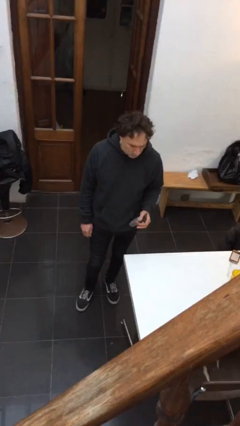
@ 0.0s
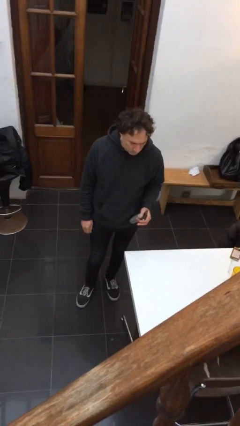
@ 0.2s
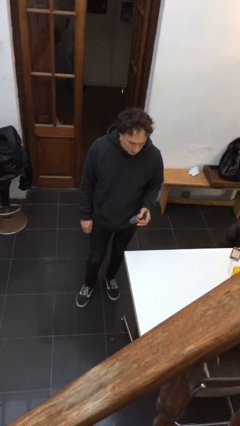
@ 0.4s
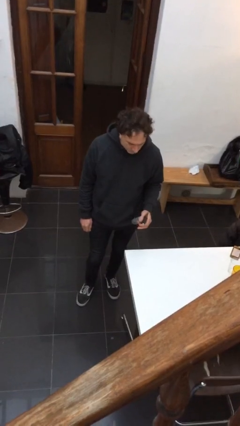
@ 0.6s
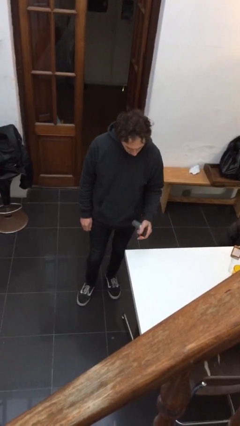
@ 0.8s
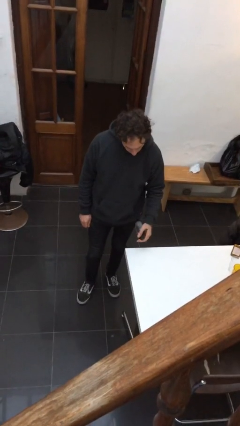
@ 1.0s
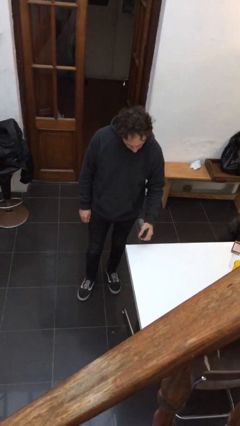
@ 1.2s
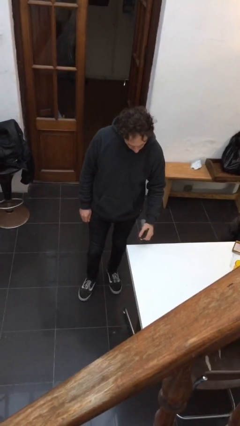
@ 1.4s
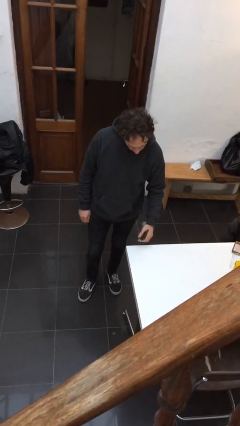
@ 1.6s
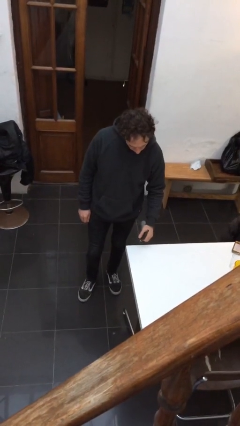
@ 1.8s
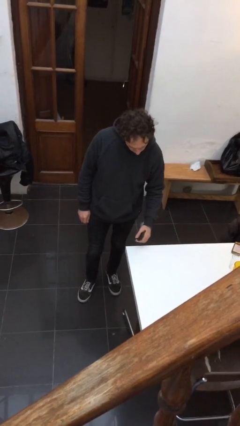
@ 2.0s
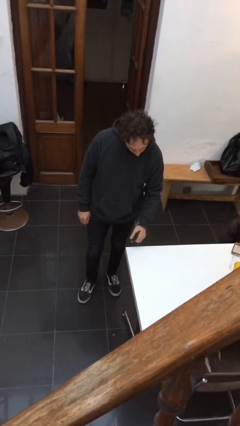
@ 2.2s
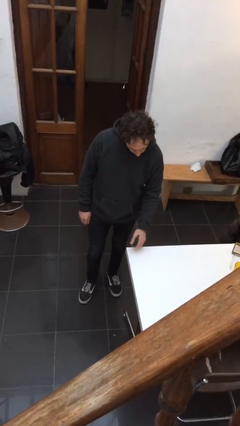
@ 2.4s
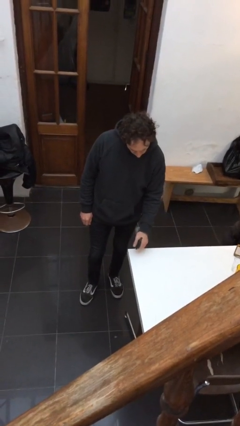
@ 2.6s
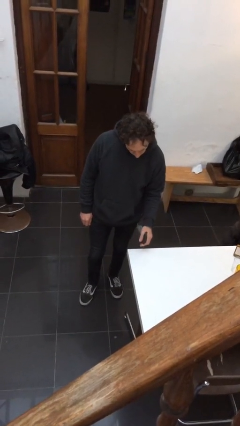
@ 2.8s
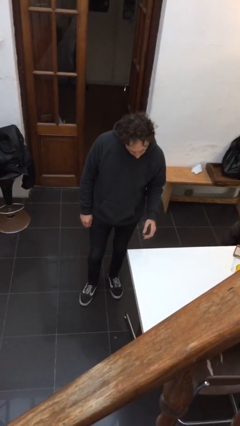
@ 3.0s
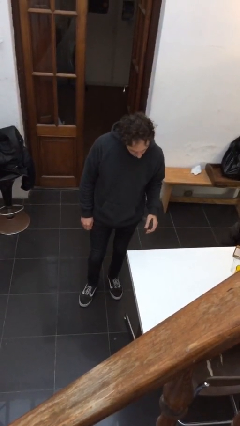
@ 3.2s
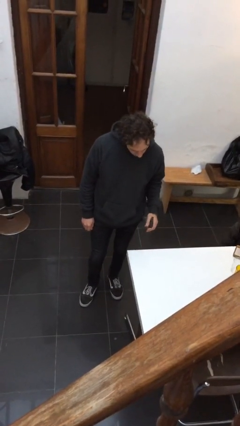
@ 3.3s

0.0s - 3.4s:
person sprays from bottle

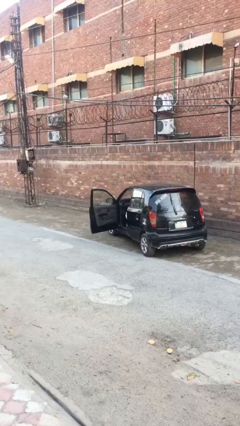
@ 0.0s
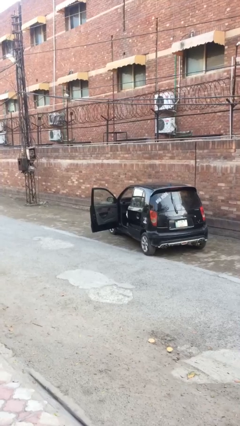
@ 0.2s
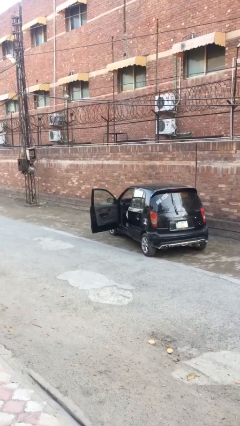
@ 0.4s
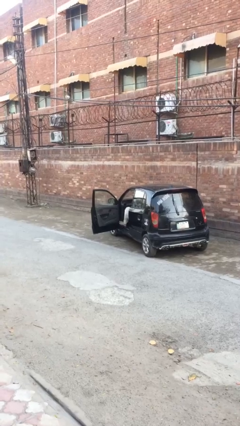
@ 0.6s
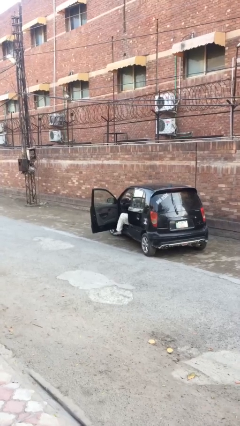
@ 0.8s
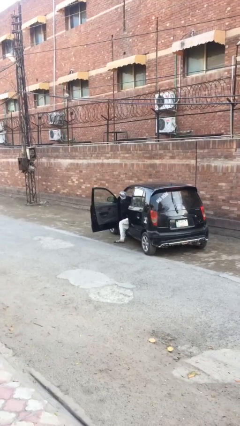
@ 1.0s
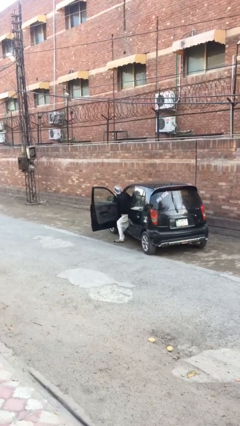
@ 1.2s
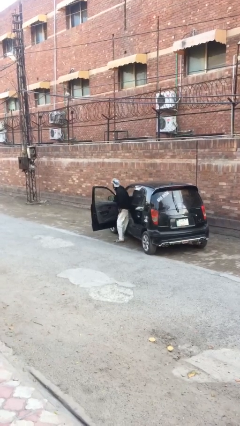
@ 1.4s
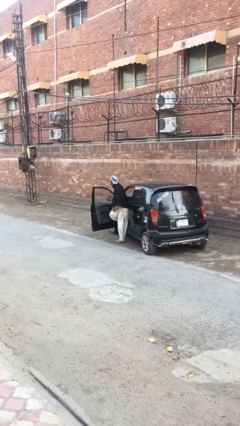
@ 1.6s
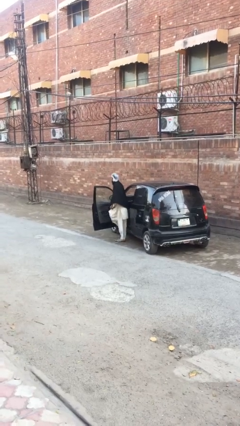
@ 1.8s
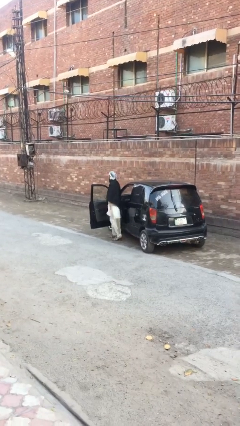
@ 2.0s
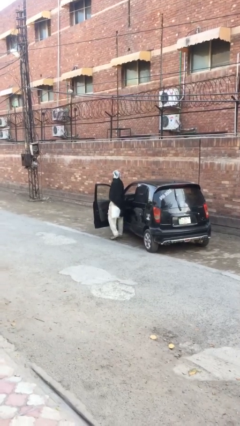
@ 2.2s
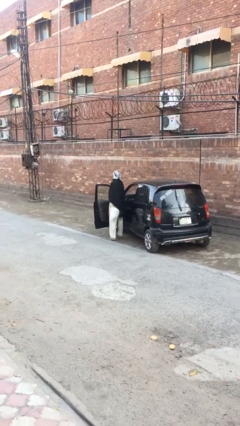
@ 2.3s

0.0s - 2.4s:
person exits car

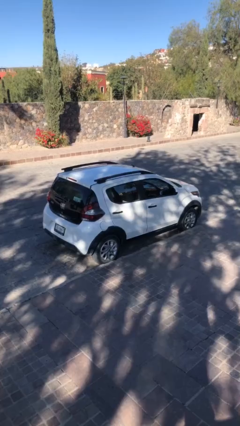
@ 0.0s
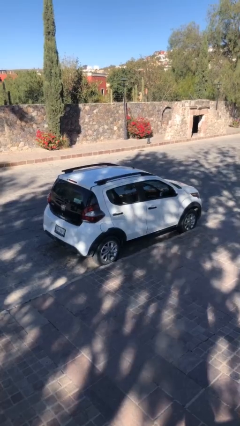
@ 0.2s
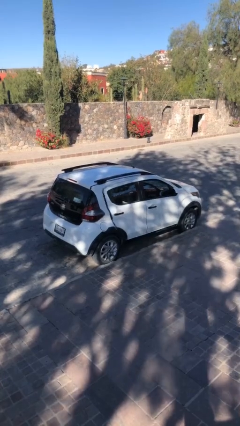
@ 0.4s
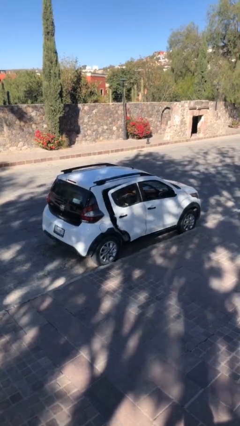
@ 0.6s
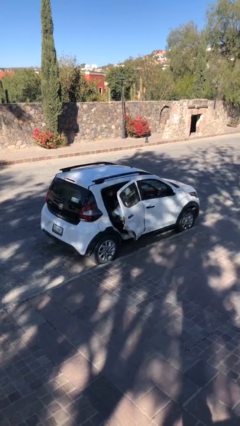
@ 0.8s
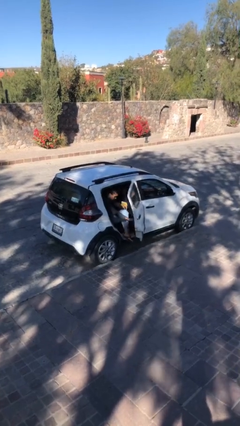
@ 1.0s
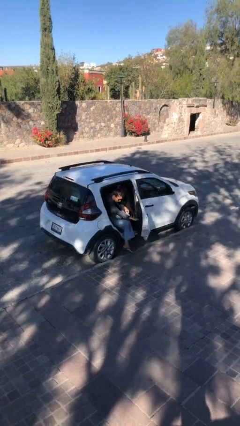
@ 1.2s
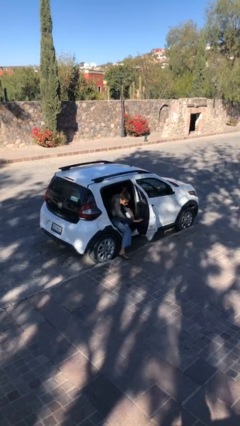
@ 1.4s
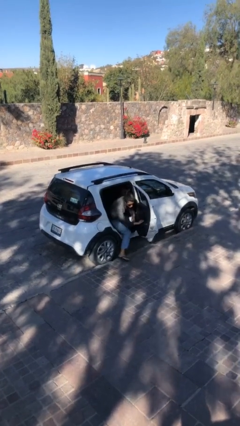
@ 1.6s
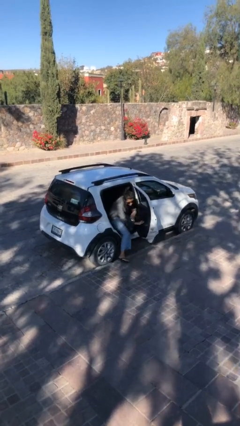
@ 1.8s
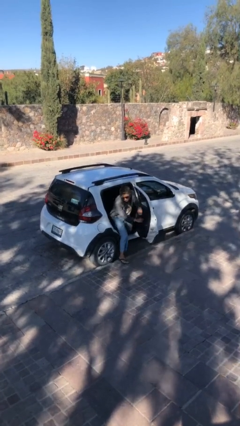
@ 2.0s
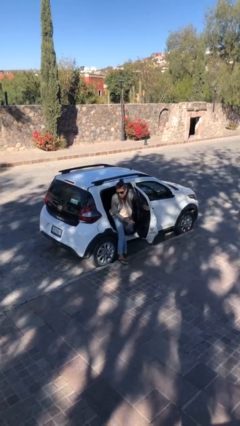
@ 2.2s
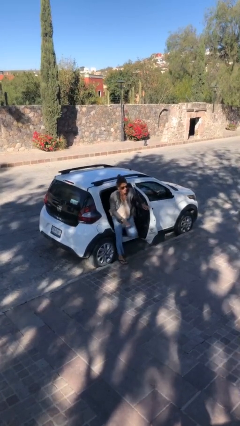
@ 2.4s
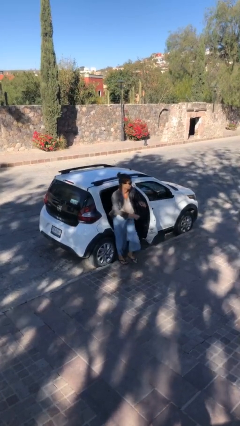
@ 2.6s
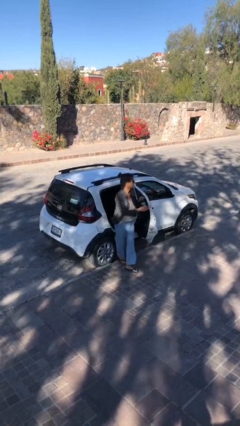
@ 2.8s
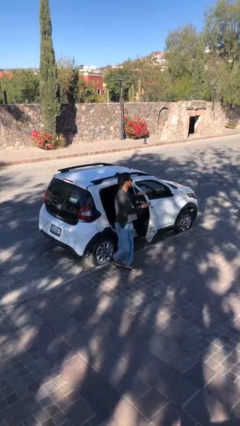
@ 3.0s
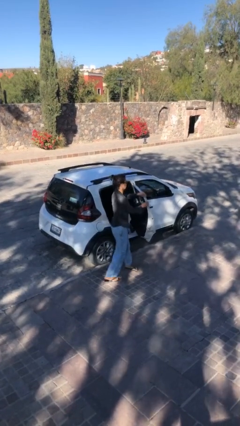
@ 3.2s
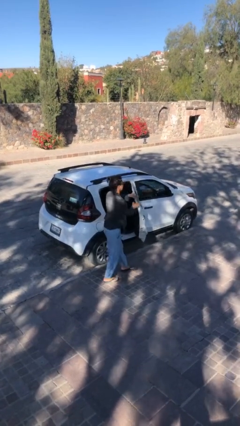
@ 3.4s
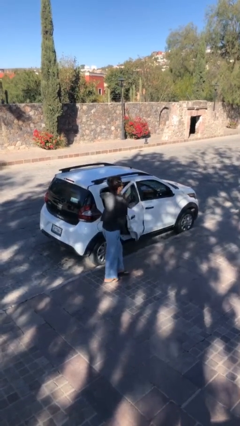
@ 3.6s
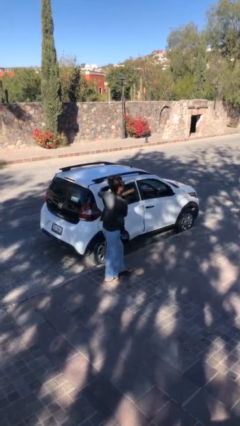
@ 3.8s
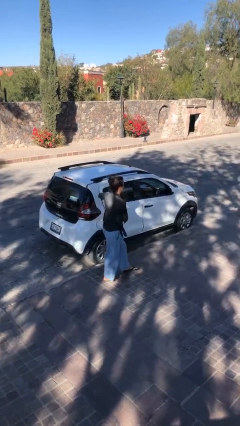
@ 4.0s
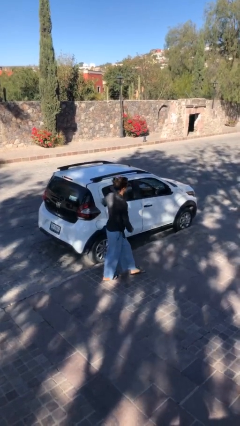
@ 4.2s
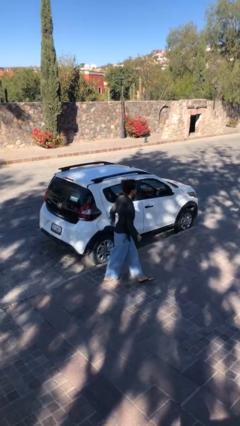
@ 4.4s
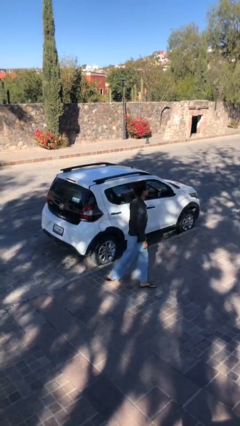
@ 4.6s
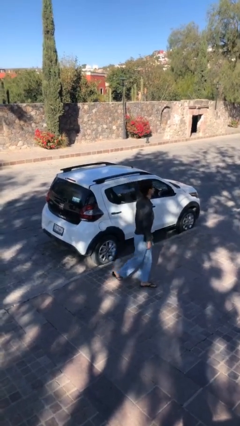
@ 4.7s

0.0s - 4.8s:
car drops off person

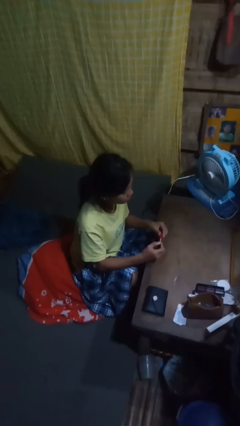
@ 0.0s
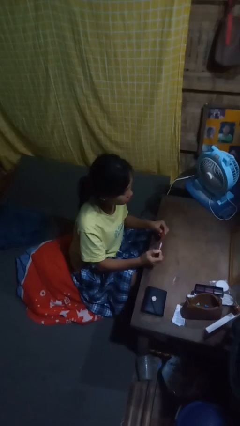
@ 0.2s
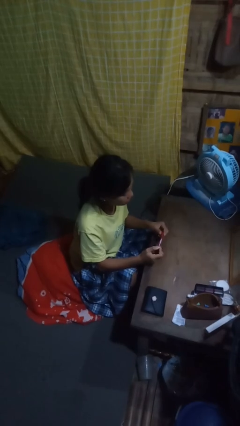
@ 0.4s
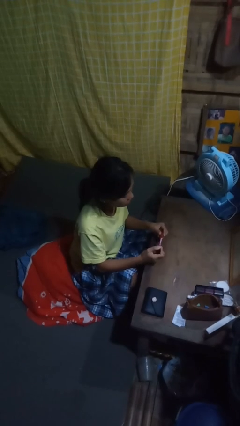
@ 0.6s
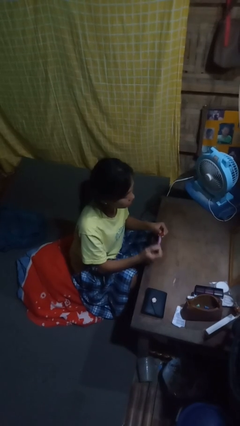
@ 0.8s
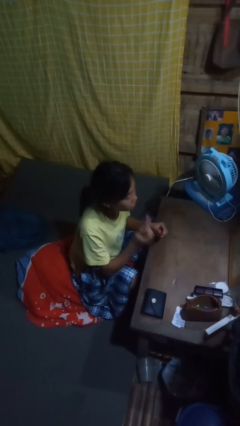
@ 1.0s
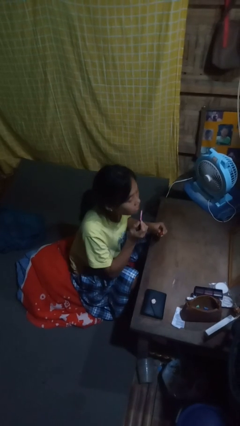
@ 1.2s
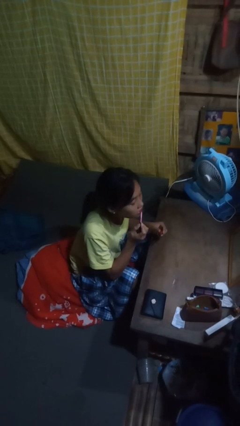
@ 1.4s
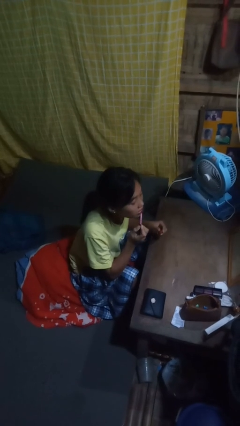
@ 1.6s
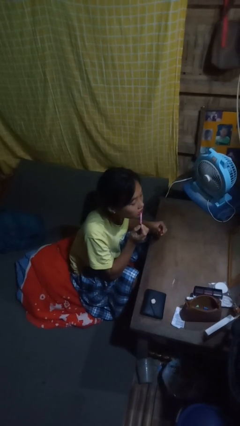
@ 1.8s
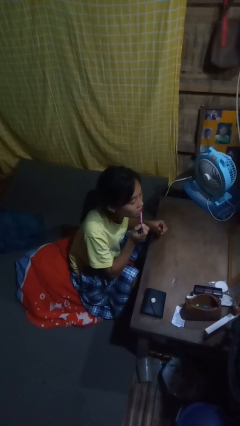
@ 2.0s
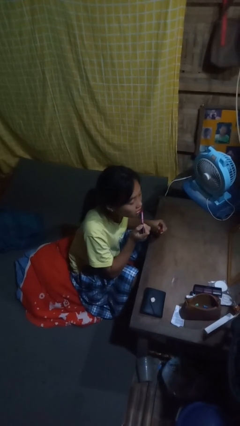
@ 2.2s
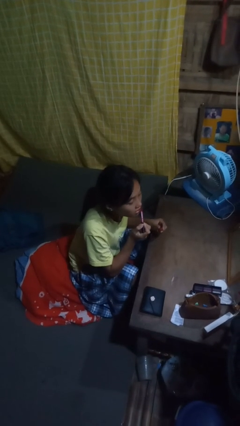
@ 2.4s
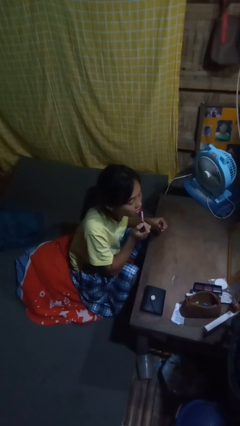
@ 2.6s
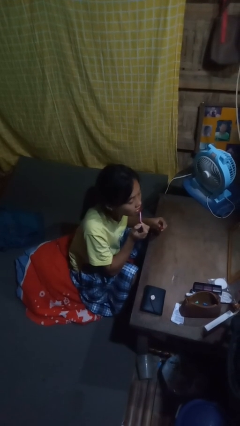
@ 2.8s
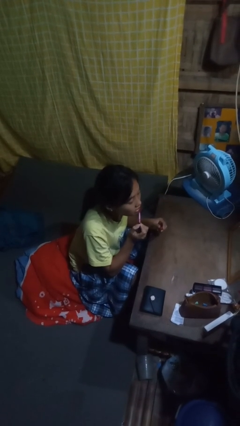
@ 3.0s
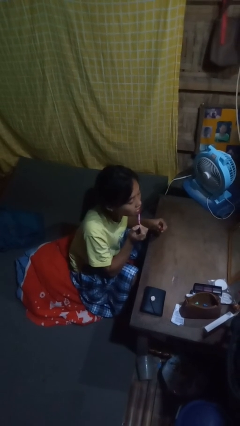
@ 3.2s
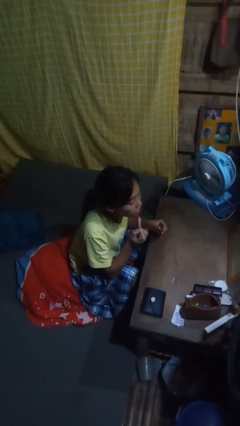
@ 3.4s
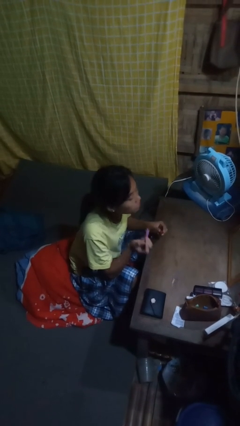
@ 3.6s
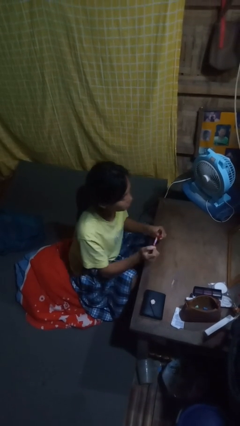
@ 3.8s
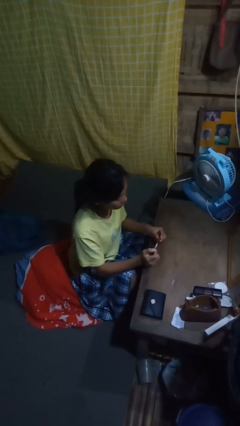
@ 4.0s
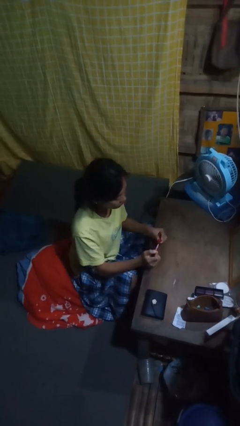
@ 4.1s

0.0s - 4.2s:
person applies lip makeup

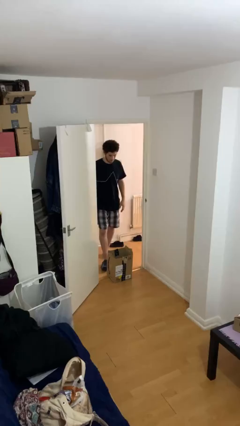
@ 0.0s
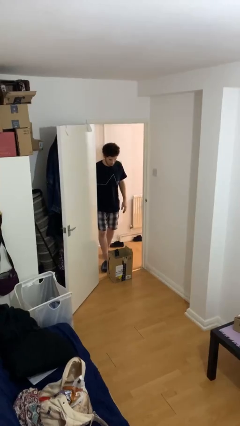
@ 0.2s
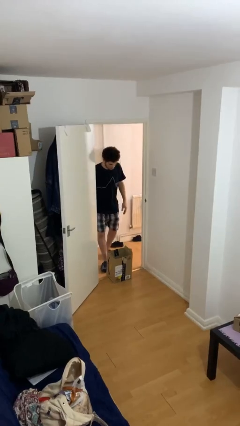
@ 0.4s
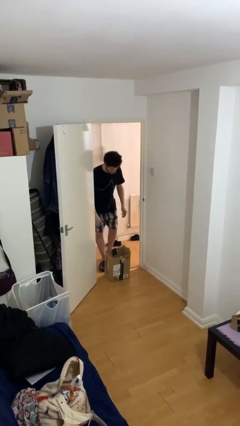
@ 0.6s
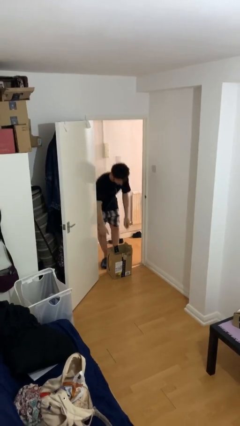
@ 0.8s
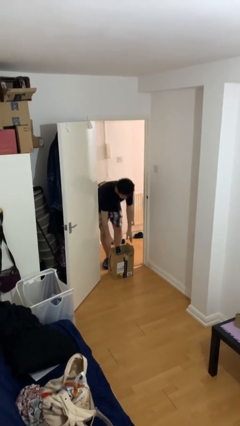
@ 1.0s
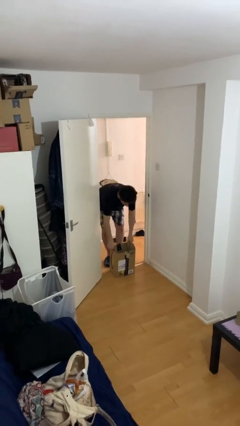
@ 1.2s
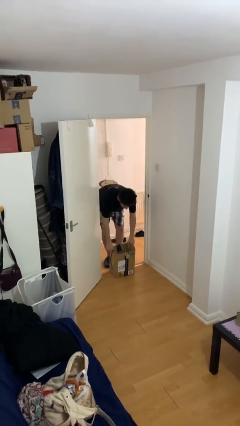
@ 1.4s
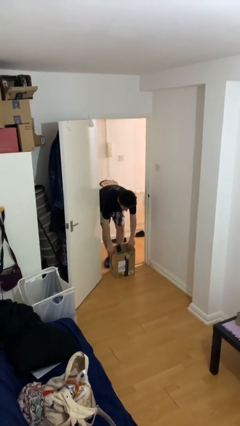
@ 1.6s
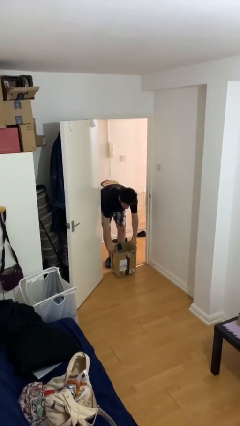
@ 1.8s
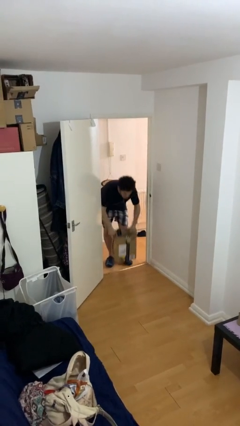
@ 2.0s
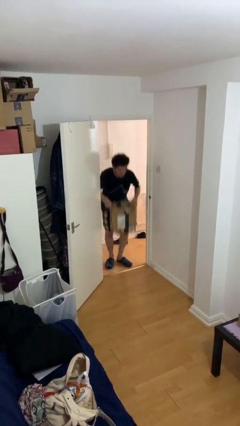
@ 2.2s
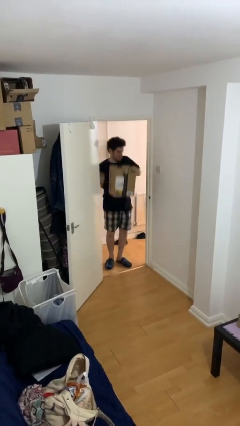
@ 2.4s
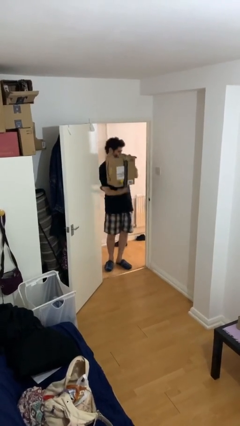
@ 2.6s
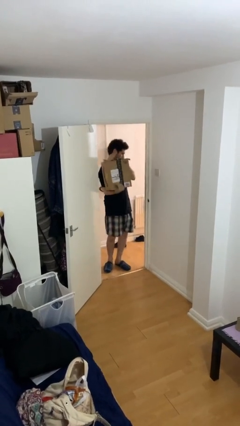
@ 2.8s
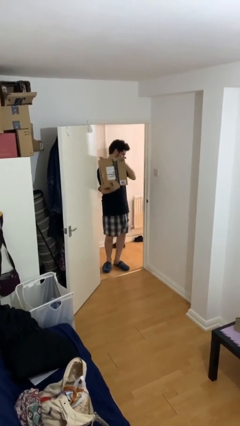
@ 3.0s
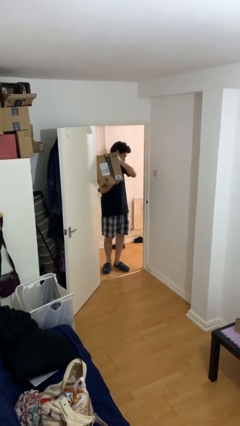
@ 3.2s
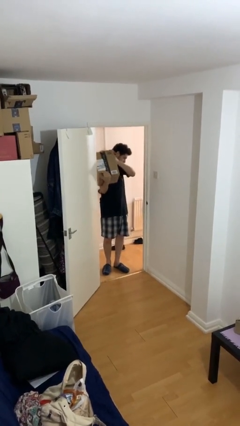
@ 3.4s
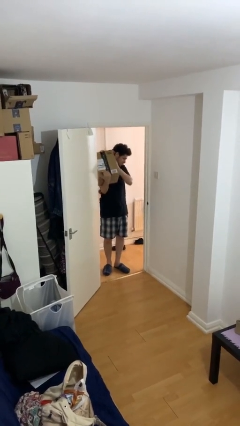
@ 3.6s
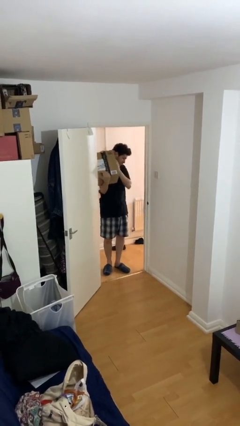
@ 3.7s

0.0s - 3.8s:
person picks up object from floor
